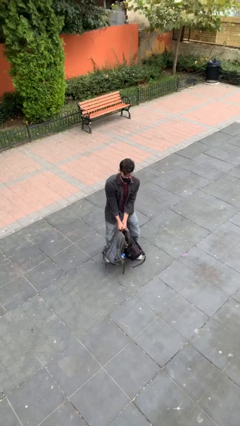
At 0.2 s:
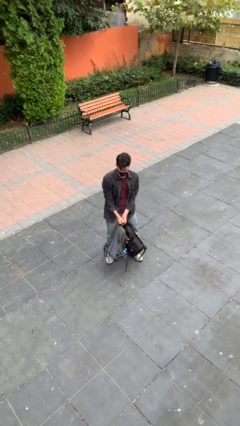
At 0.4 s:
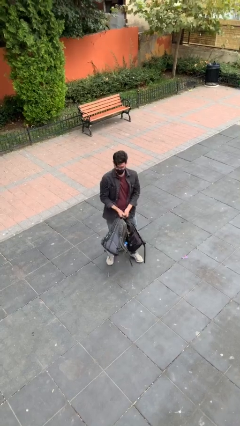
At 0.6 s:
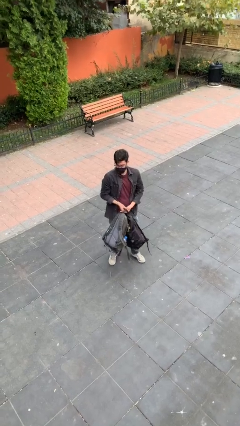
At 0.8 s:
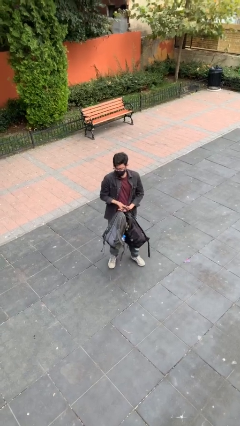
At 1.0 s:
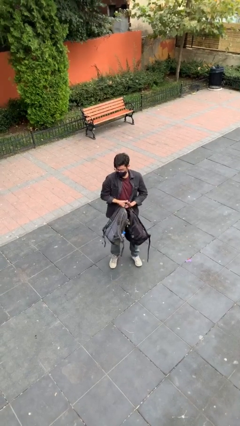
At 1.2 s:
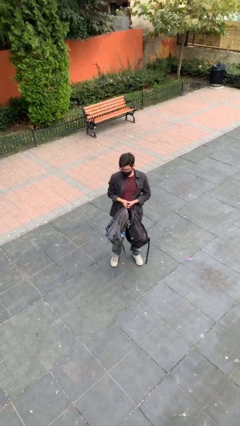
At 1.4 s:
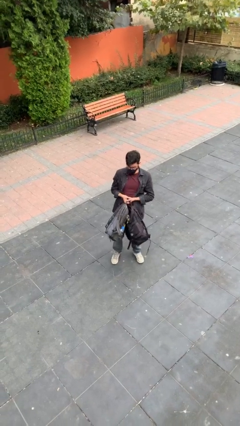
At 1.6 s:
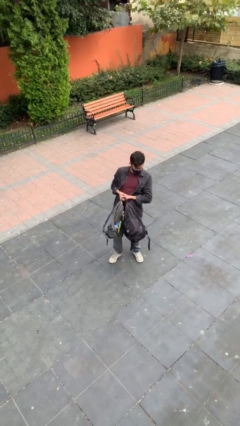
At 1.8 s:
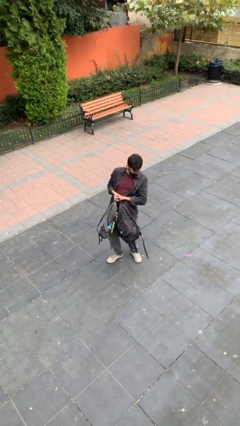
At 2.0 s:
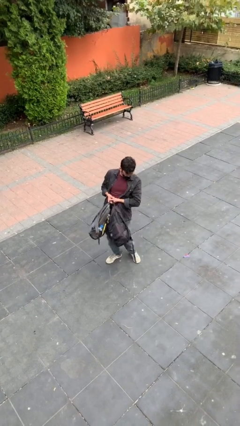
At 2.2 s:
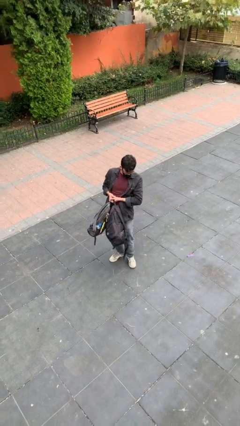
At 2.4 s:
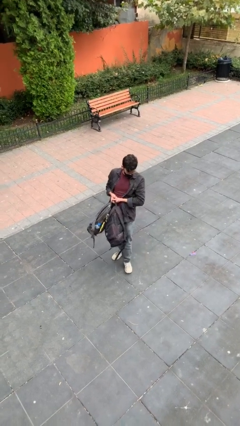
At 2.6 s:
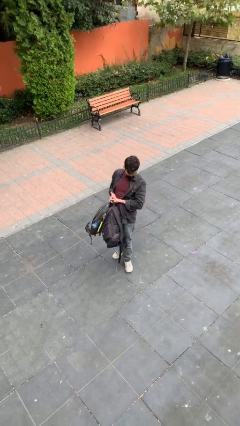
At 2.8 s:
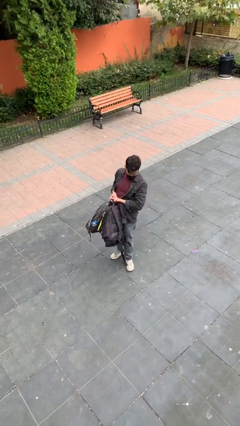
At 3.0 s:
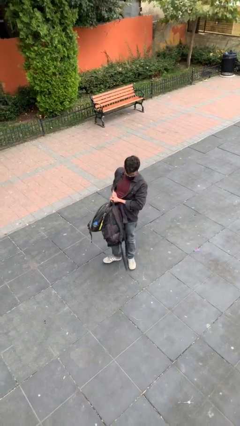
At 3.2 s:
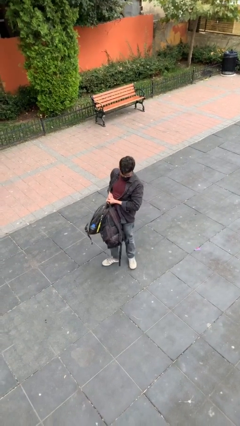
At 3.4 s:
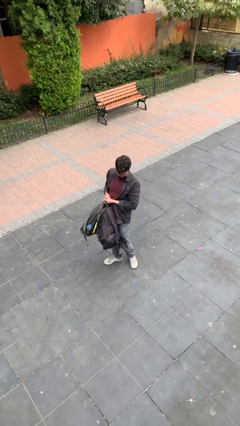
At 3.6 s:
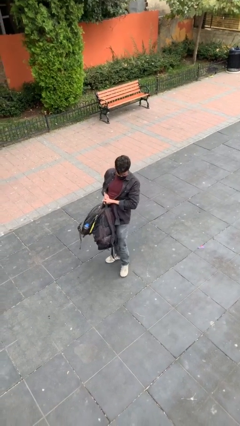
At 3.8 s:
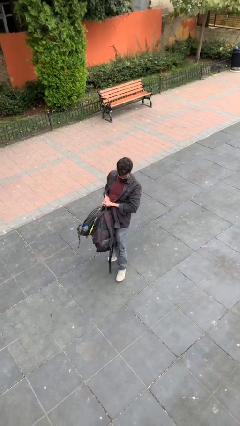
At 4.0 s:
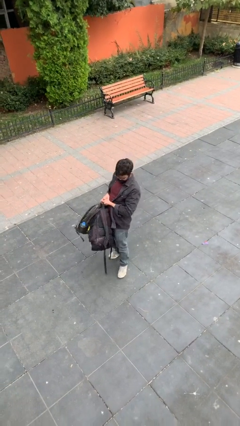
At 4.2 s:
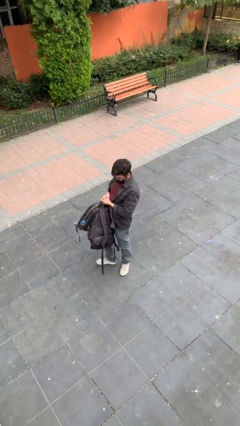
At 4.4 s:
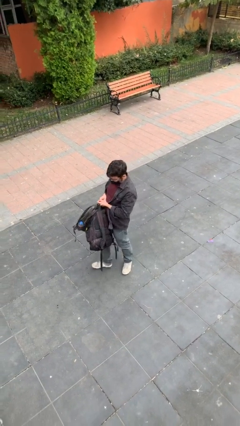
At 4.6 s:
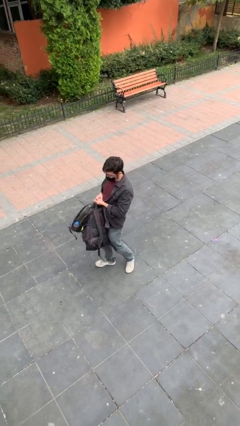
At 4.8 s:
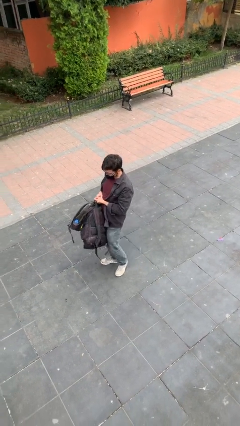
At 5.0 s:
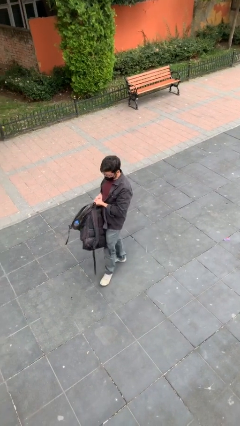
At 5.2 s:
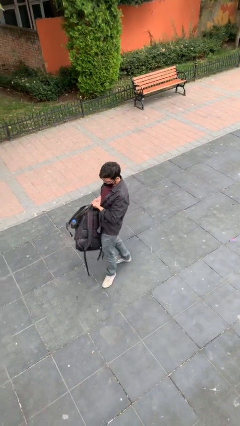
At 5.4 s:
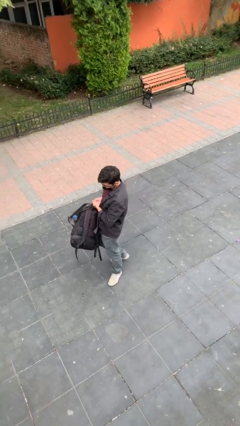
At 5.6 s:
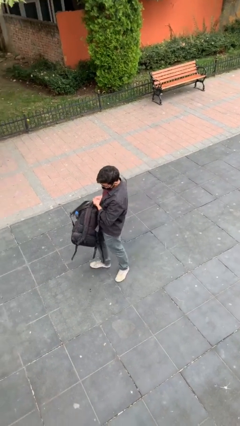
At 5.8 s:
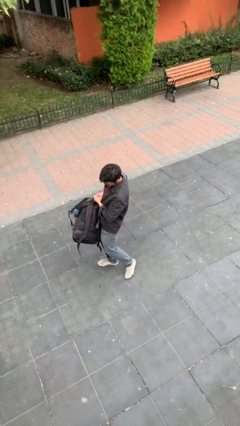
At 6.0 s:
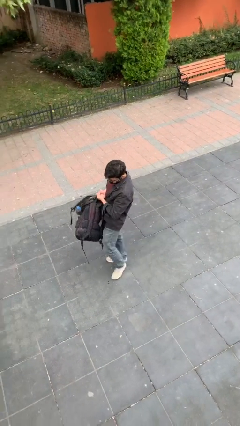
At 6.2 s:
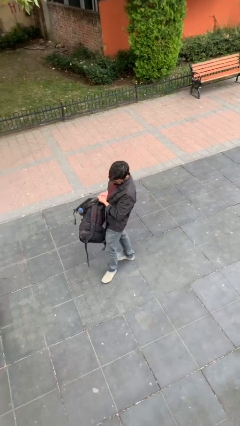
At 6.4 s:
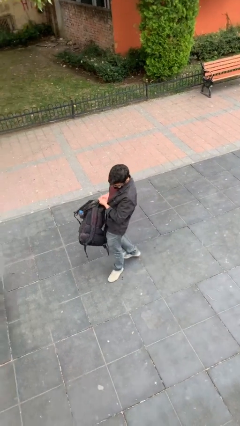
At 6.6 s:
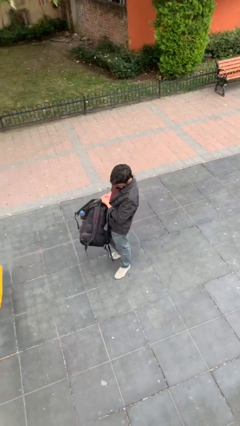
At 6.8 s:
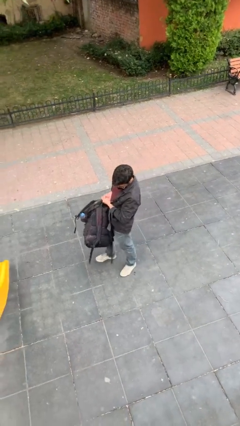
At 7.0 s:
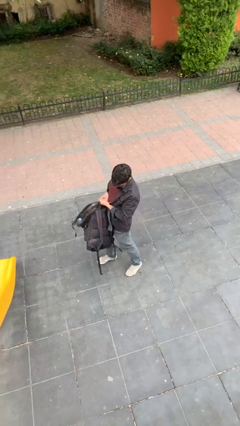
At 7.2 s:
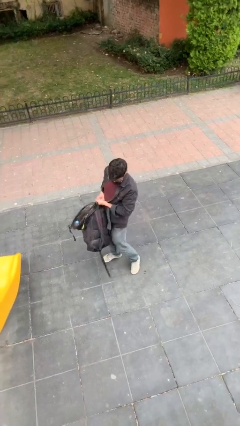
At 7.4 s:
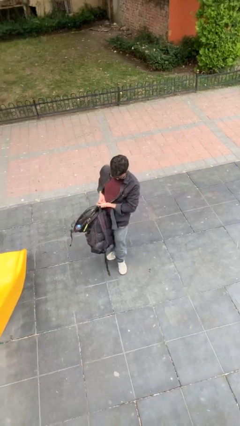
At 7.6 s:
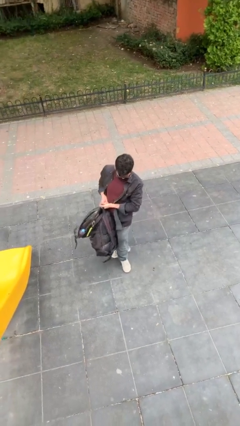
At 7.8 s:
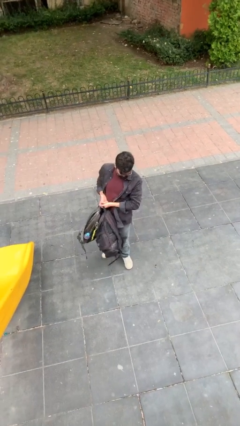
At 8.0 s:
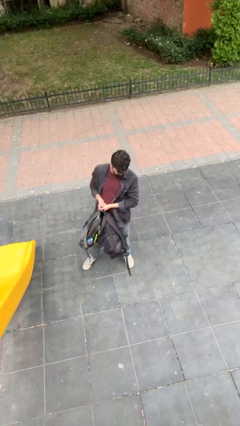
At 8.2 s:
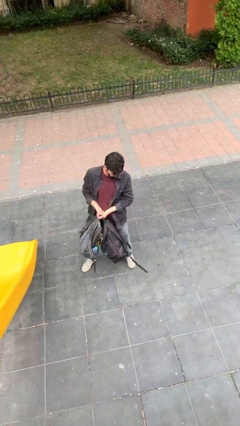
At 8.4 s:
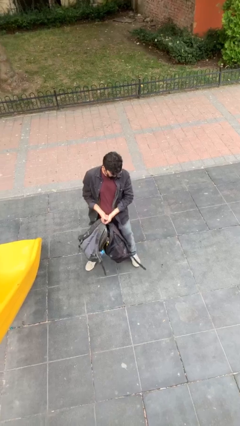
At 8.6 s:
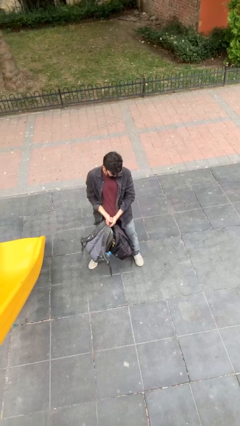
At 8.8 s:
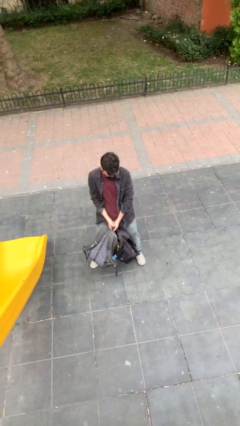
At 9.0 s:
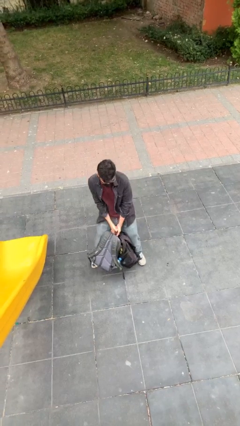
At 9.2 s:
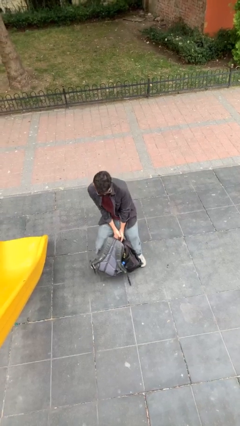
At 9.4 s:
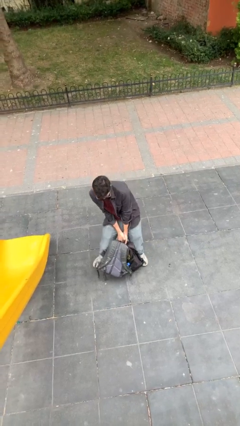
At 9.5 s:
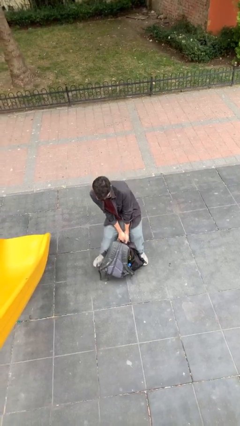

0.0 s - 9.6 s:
person carries heavy object

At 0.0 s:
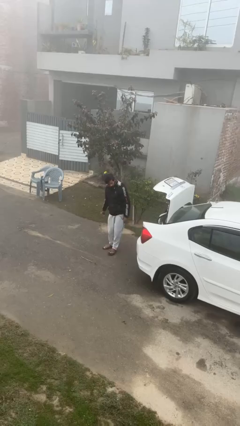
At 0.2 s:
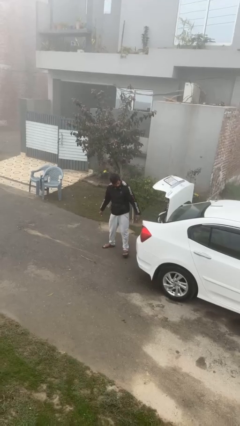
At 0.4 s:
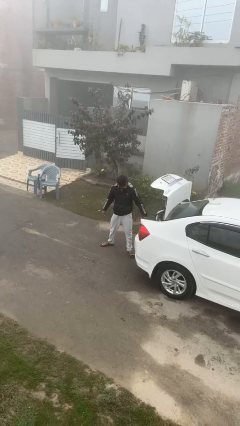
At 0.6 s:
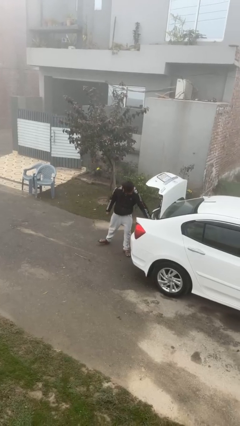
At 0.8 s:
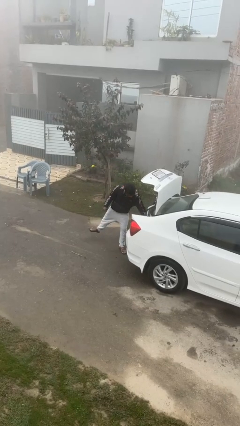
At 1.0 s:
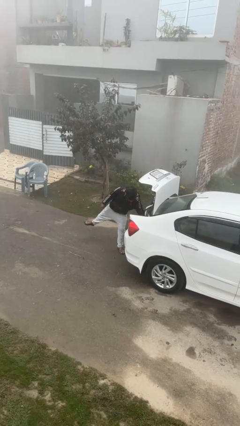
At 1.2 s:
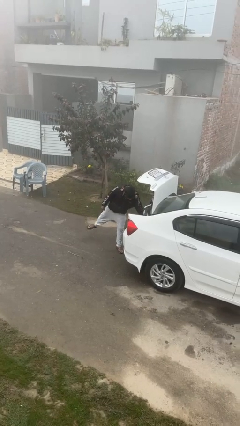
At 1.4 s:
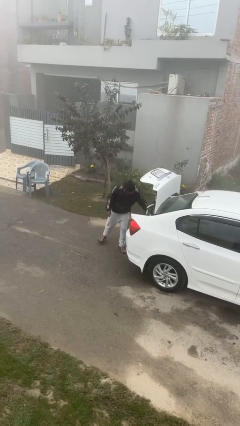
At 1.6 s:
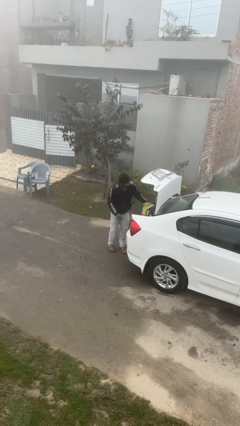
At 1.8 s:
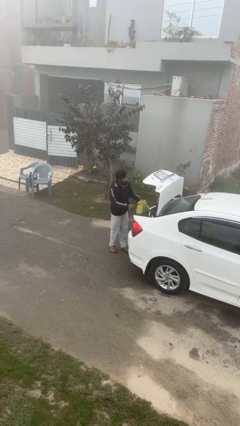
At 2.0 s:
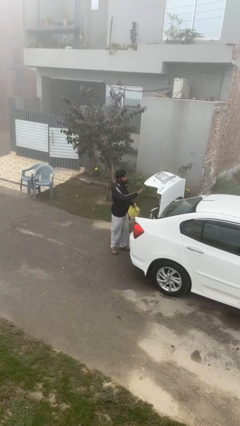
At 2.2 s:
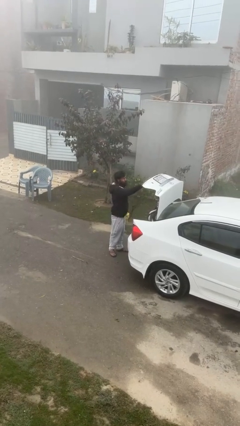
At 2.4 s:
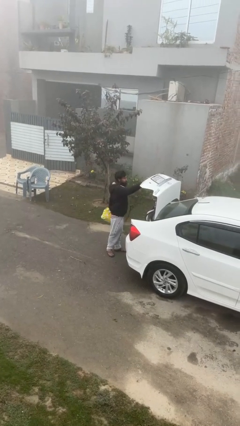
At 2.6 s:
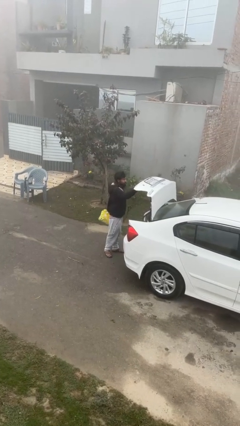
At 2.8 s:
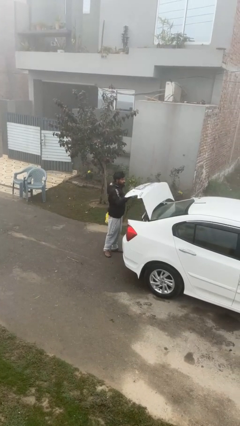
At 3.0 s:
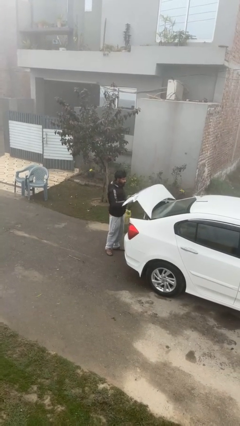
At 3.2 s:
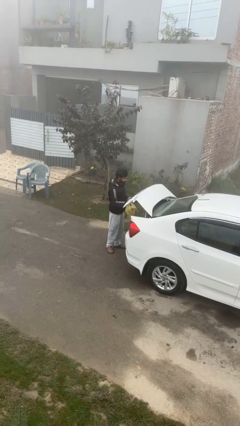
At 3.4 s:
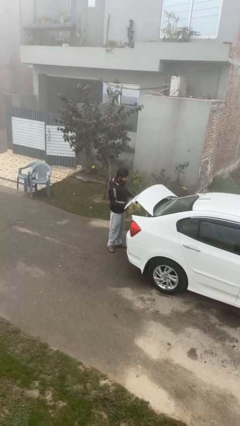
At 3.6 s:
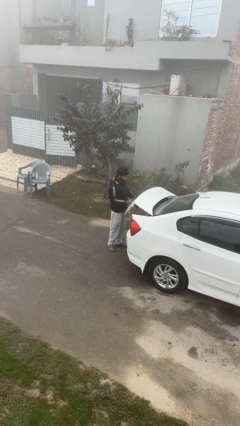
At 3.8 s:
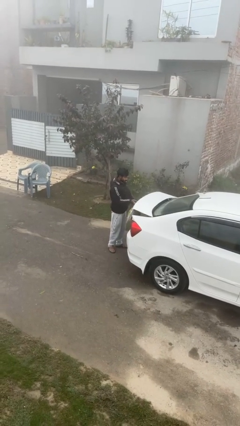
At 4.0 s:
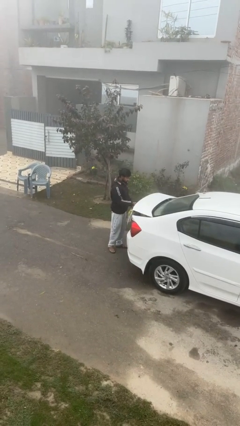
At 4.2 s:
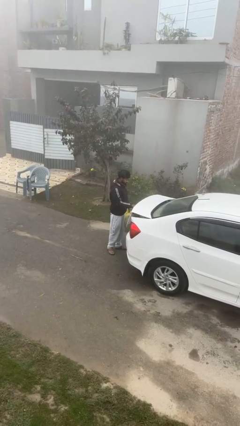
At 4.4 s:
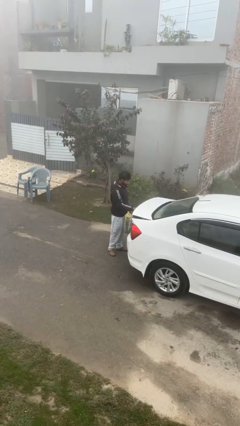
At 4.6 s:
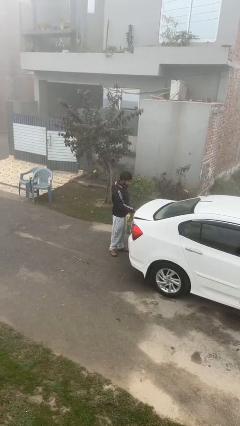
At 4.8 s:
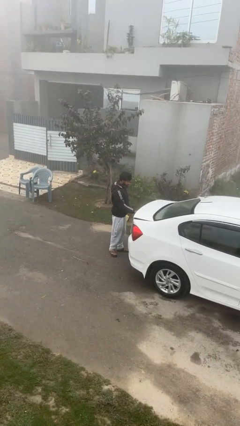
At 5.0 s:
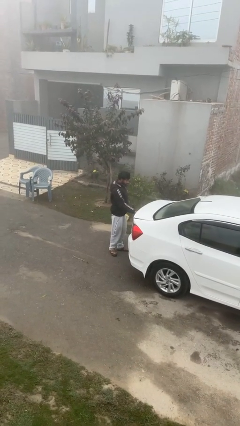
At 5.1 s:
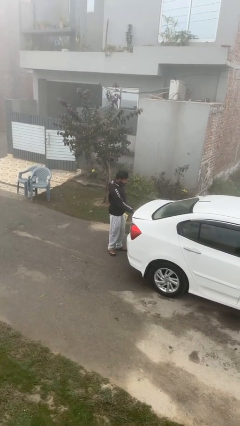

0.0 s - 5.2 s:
person unloads car

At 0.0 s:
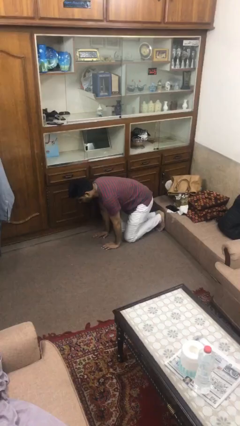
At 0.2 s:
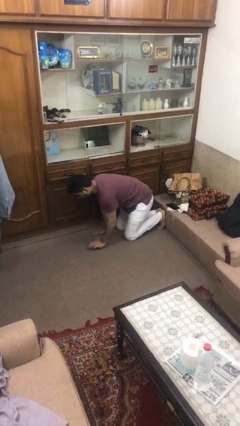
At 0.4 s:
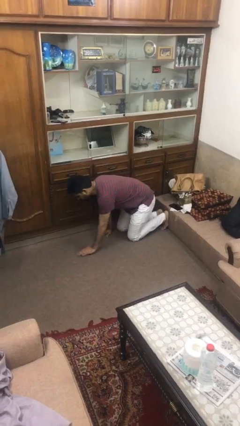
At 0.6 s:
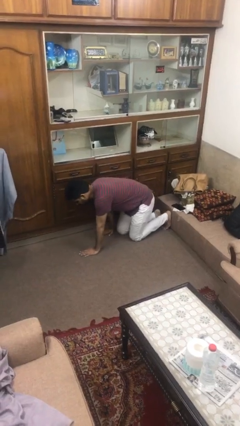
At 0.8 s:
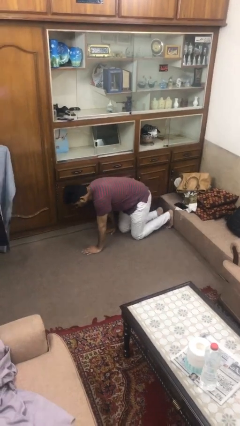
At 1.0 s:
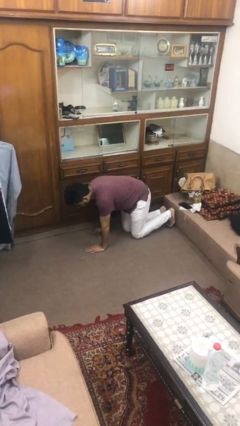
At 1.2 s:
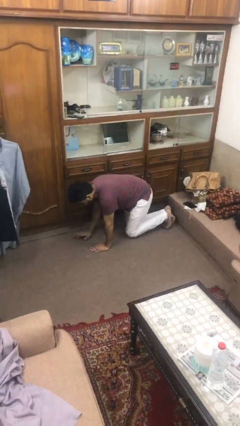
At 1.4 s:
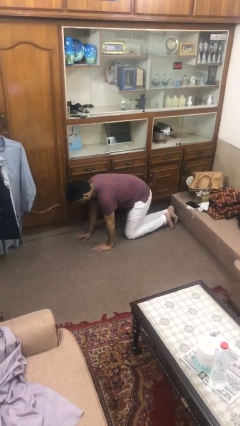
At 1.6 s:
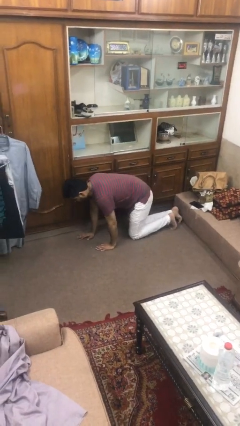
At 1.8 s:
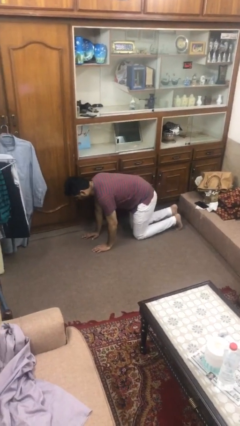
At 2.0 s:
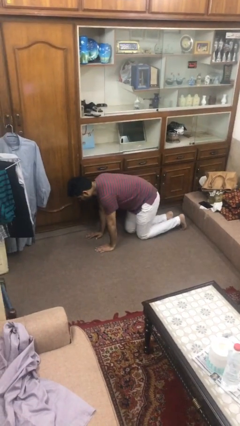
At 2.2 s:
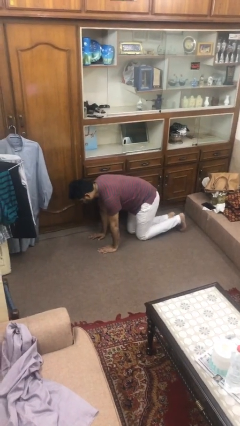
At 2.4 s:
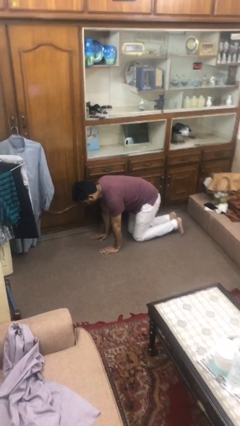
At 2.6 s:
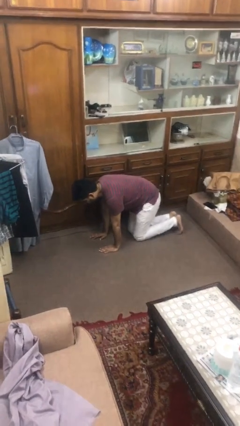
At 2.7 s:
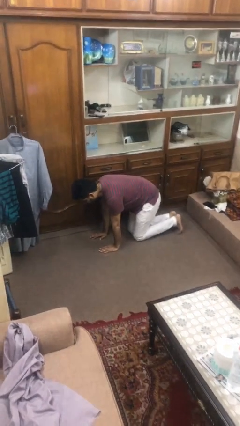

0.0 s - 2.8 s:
person crawls

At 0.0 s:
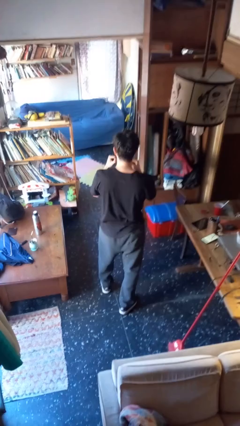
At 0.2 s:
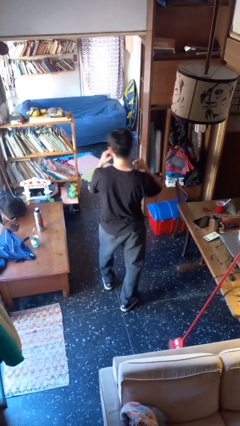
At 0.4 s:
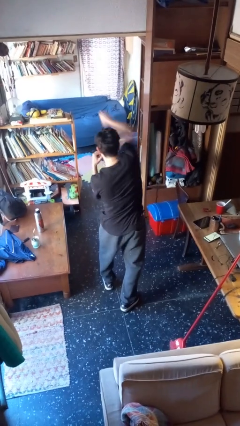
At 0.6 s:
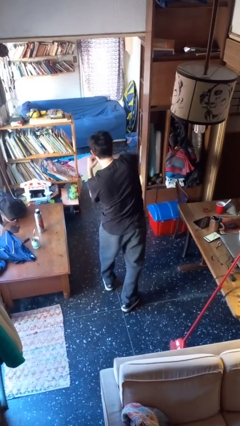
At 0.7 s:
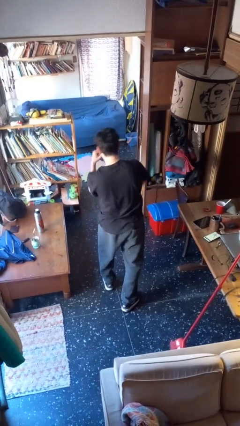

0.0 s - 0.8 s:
person punches
